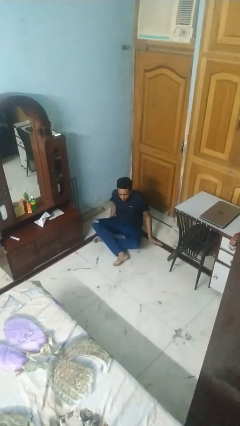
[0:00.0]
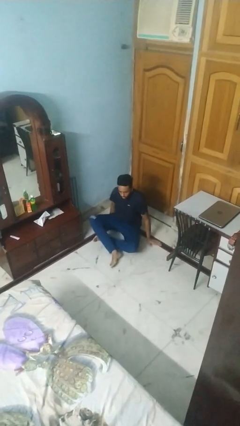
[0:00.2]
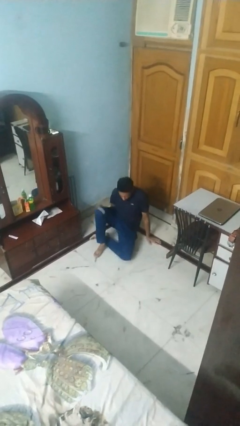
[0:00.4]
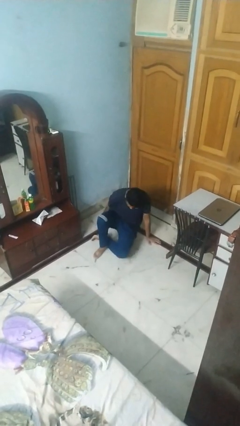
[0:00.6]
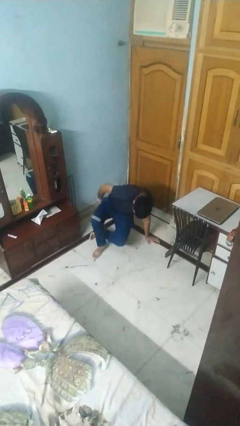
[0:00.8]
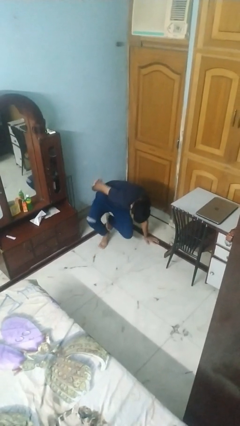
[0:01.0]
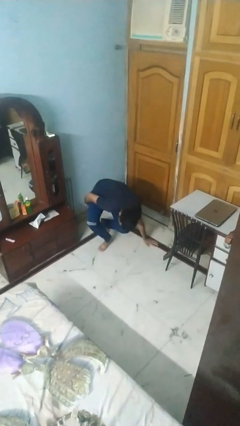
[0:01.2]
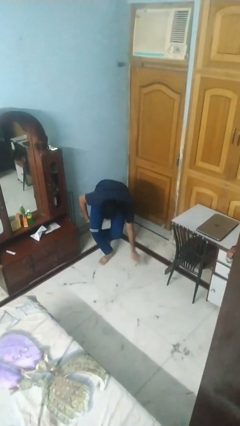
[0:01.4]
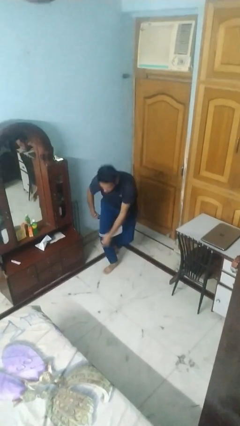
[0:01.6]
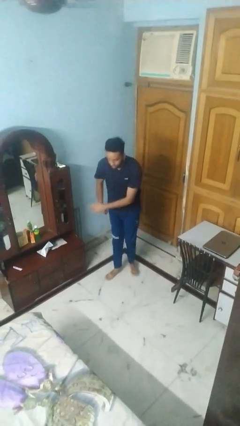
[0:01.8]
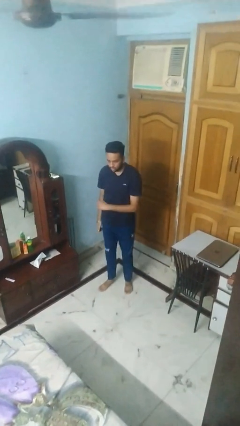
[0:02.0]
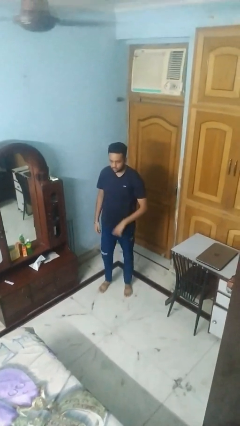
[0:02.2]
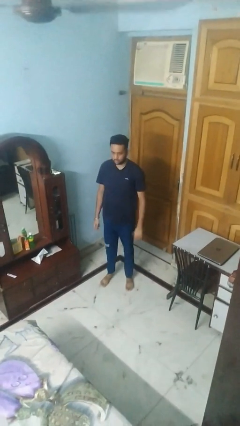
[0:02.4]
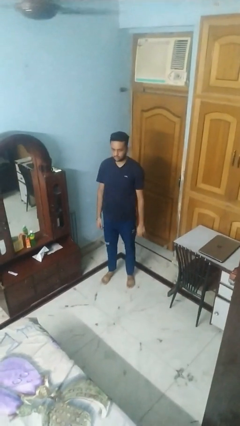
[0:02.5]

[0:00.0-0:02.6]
person stands up from floor

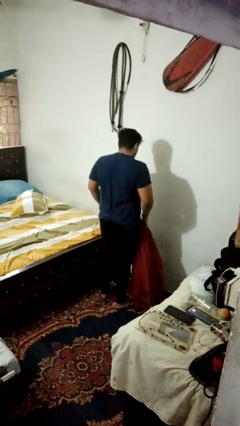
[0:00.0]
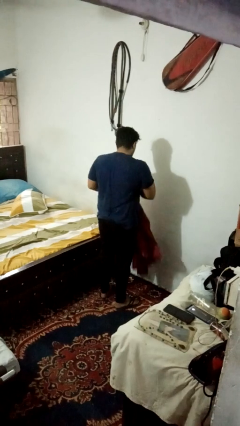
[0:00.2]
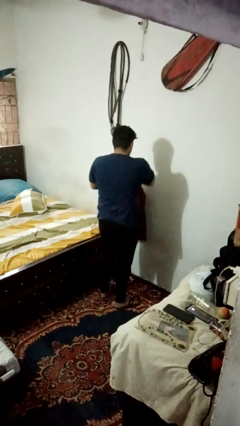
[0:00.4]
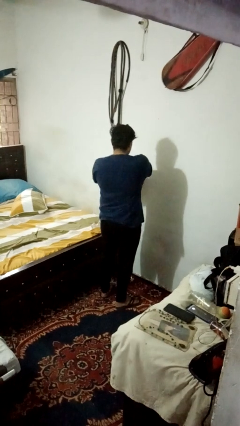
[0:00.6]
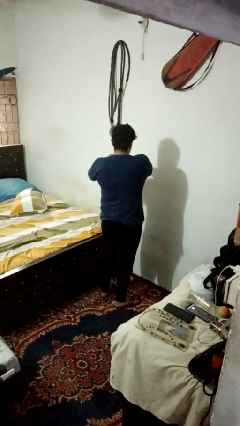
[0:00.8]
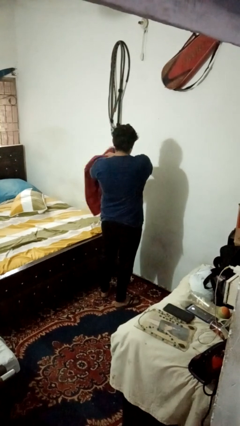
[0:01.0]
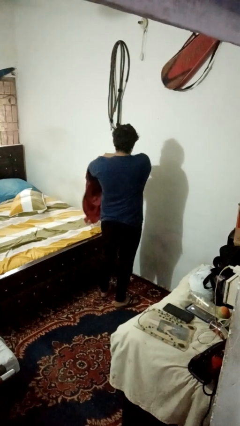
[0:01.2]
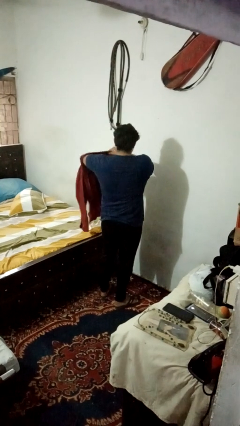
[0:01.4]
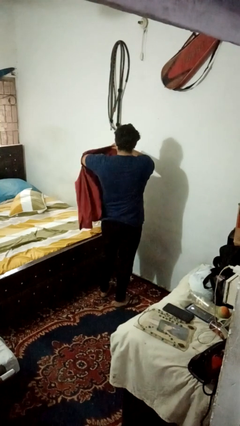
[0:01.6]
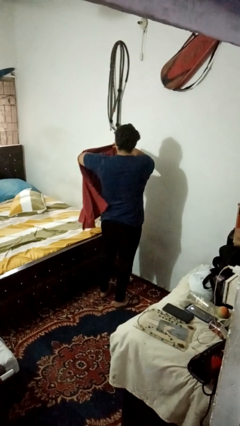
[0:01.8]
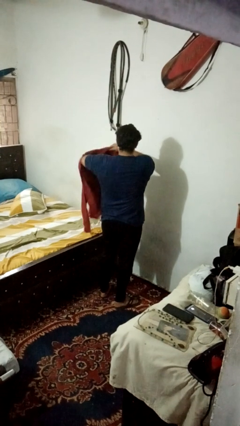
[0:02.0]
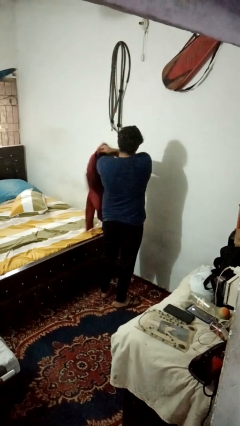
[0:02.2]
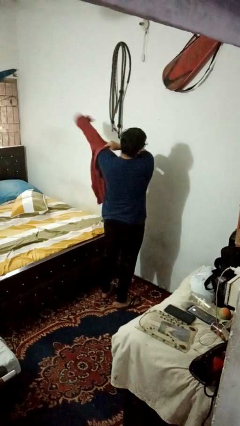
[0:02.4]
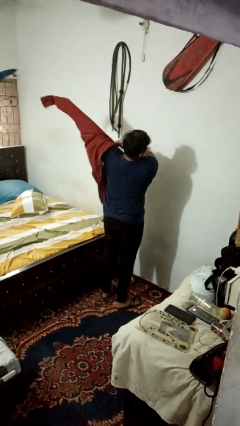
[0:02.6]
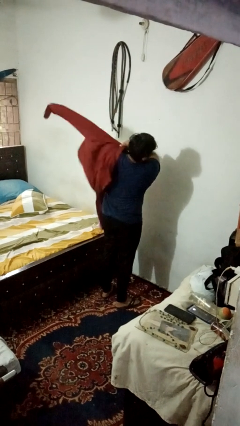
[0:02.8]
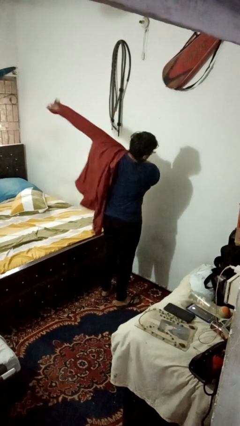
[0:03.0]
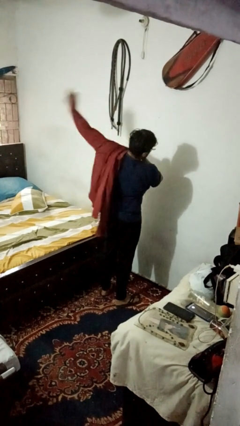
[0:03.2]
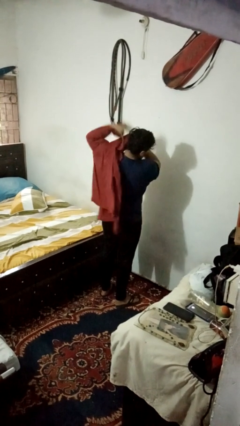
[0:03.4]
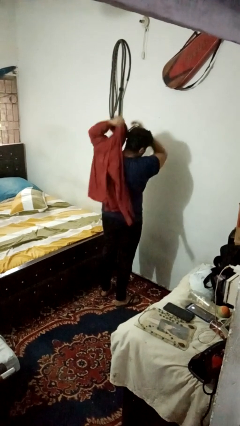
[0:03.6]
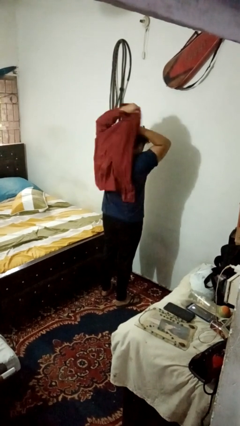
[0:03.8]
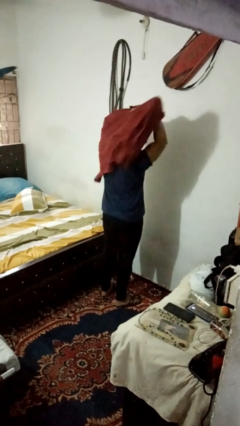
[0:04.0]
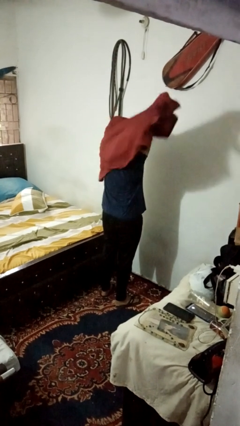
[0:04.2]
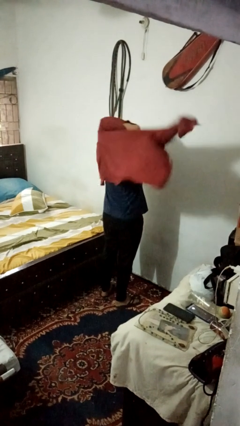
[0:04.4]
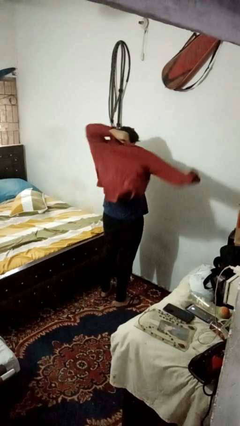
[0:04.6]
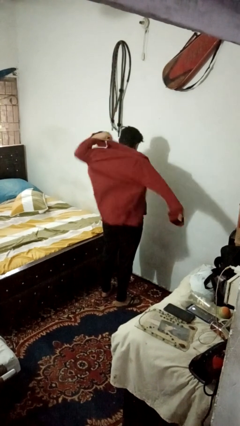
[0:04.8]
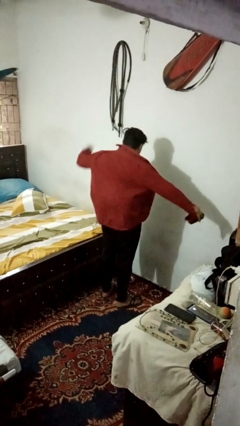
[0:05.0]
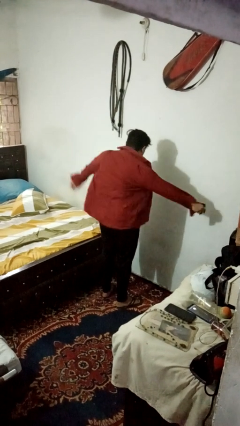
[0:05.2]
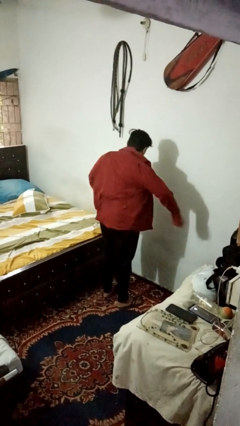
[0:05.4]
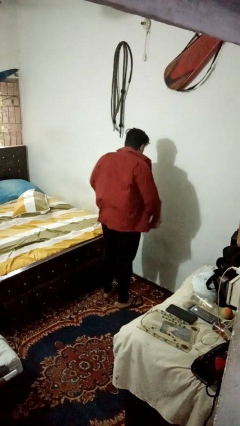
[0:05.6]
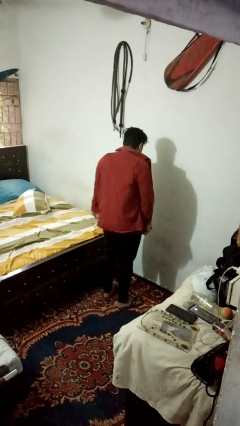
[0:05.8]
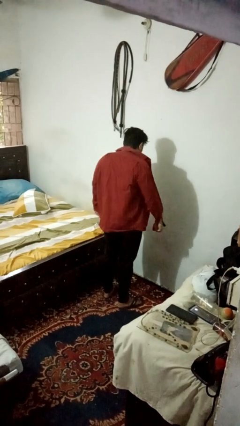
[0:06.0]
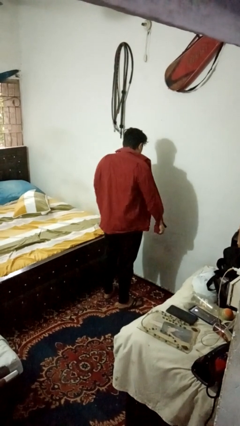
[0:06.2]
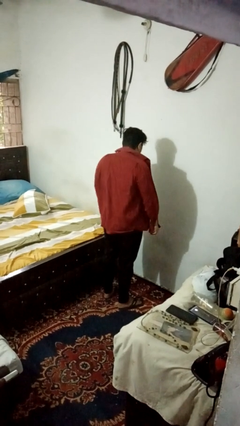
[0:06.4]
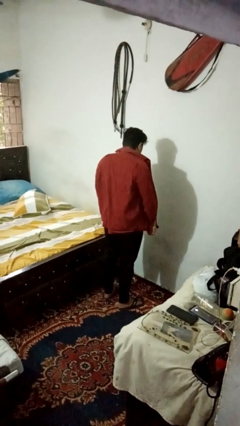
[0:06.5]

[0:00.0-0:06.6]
person puts on shirt

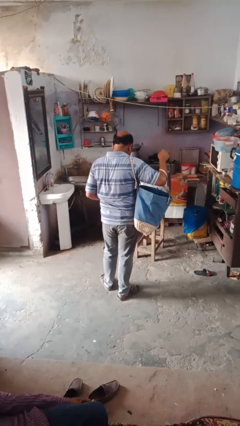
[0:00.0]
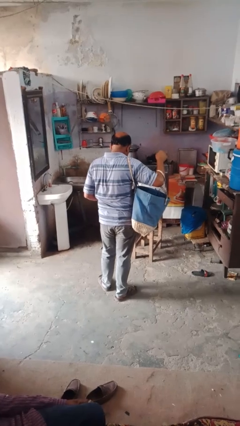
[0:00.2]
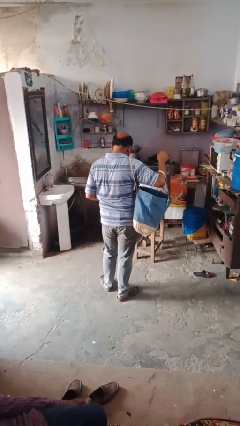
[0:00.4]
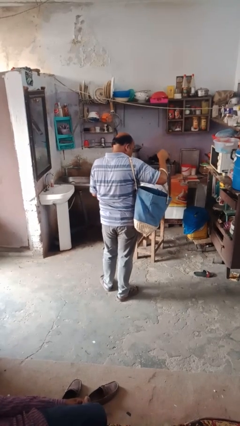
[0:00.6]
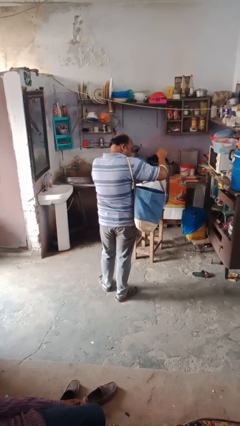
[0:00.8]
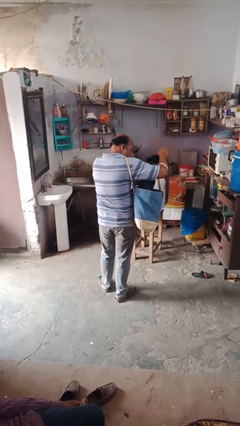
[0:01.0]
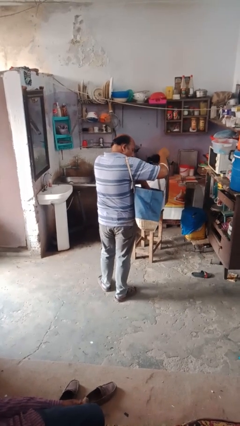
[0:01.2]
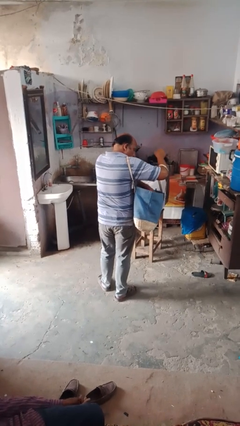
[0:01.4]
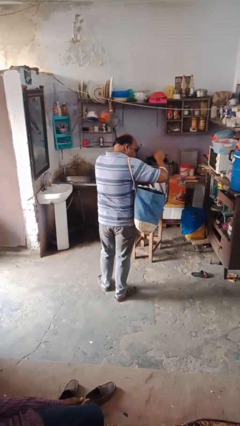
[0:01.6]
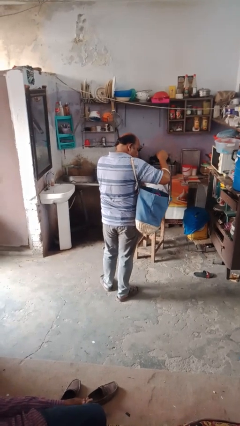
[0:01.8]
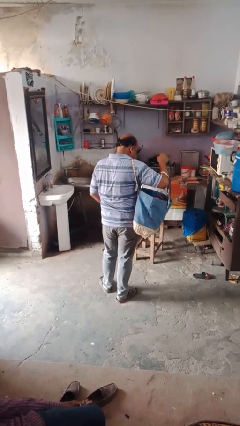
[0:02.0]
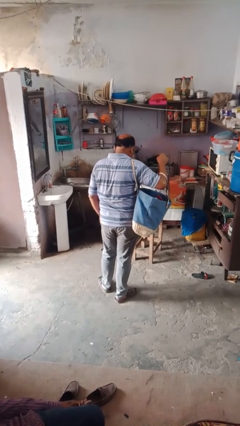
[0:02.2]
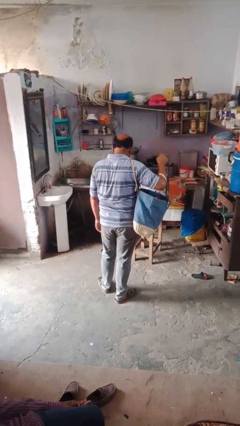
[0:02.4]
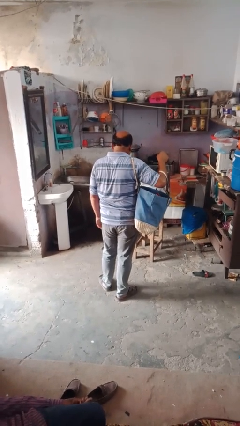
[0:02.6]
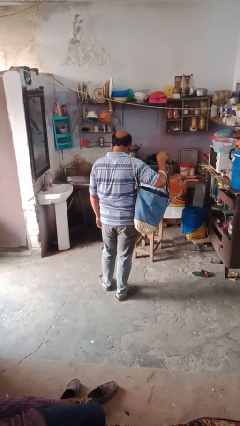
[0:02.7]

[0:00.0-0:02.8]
person puts object into bag

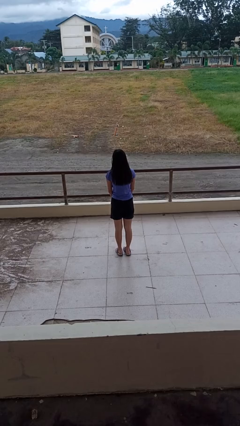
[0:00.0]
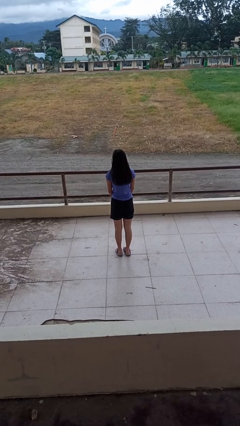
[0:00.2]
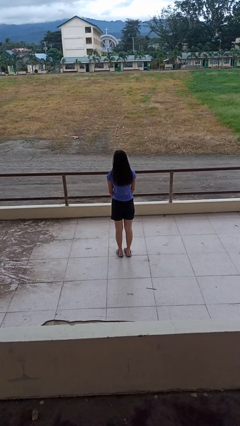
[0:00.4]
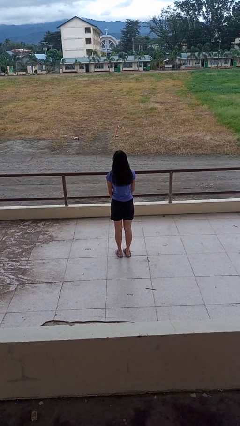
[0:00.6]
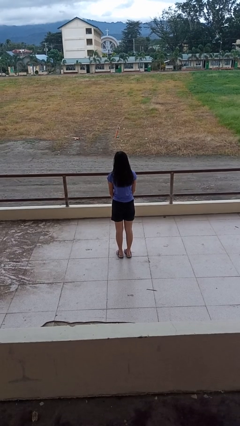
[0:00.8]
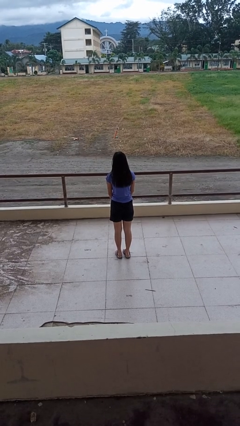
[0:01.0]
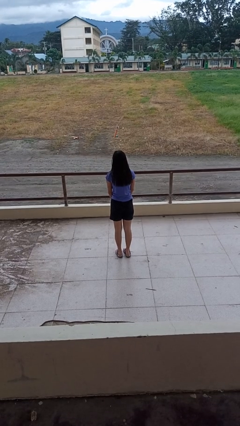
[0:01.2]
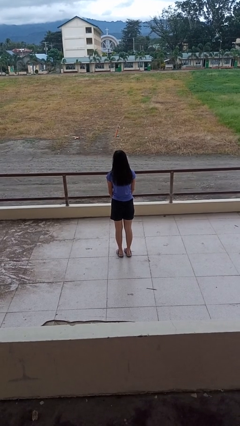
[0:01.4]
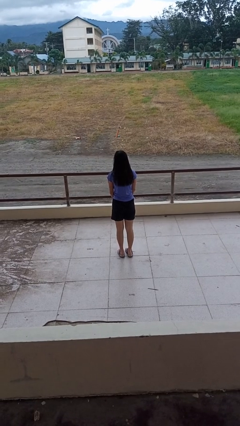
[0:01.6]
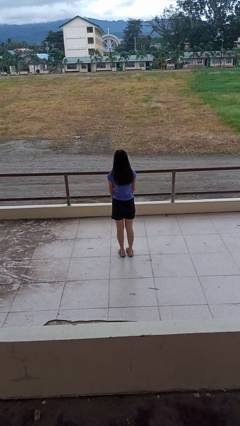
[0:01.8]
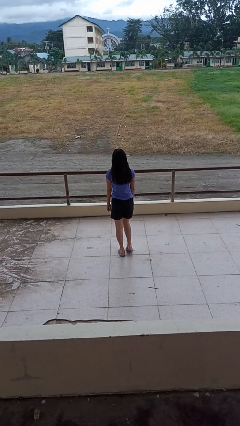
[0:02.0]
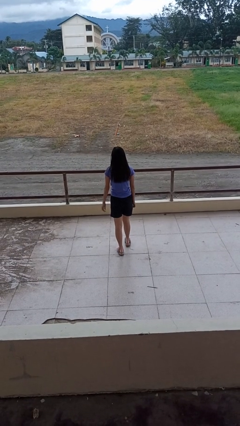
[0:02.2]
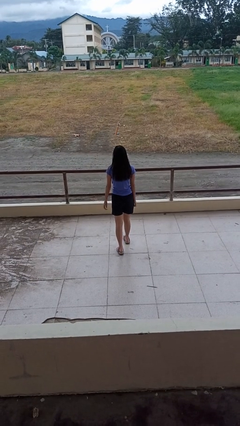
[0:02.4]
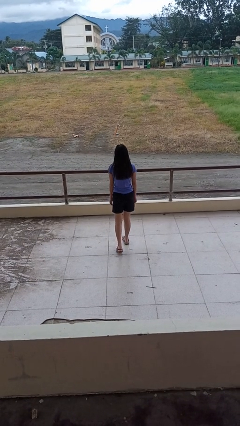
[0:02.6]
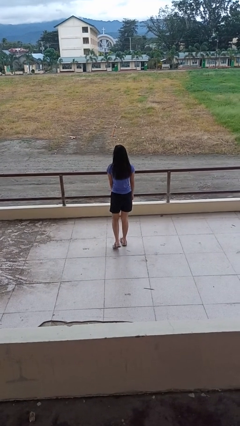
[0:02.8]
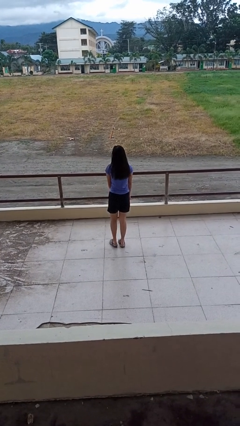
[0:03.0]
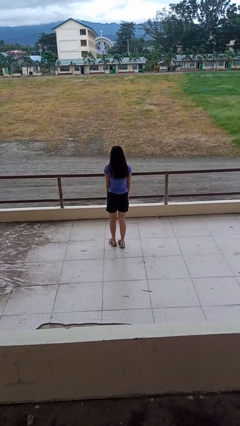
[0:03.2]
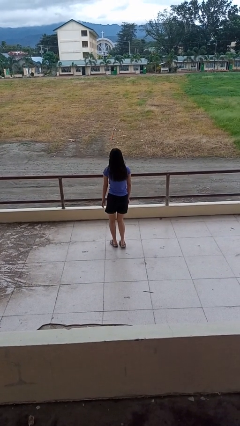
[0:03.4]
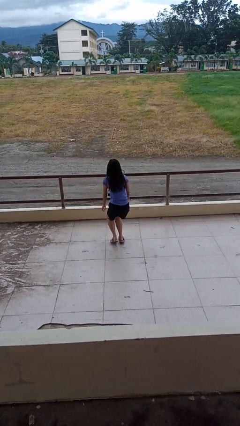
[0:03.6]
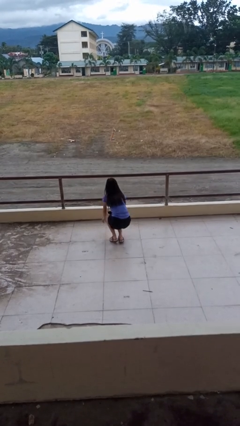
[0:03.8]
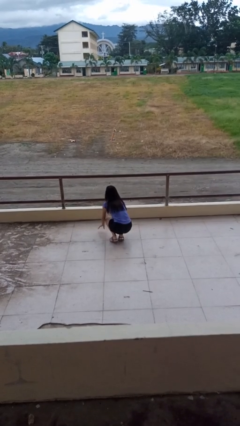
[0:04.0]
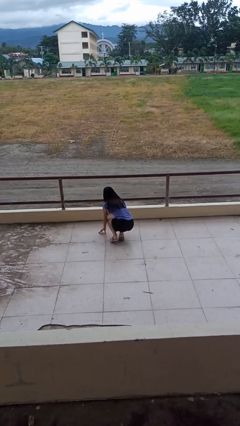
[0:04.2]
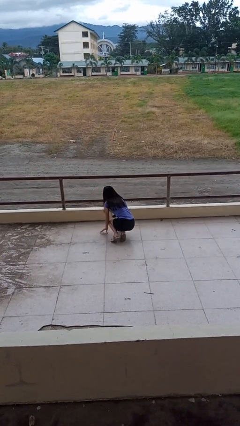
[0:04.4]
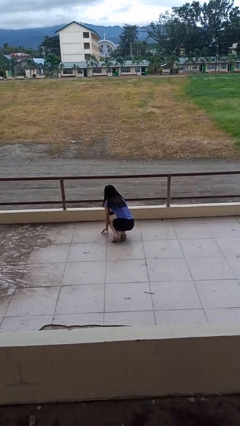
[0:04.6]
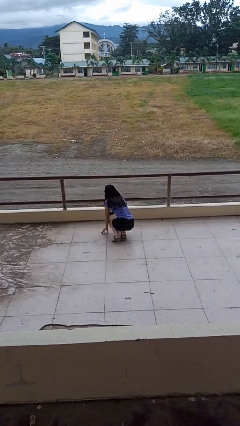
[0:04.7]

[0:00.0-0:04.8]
person trips on object on floor

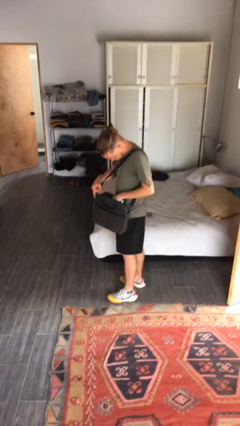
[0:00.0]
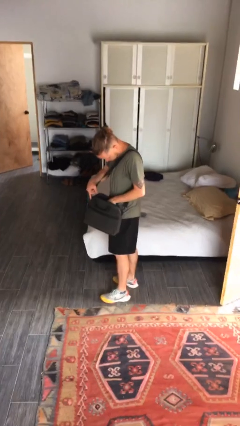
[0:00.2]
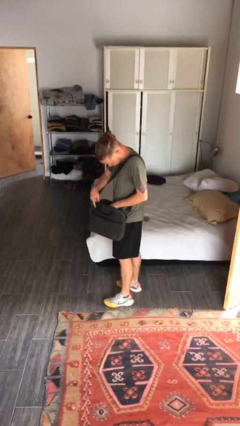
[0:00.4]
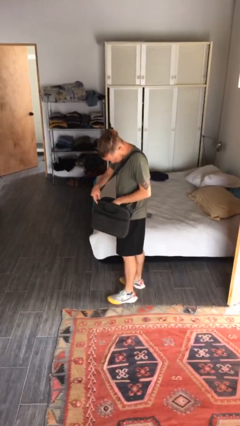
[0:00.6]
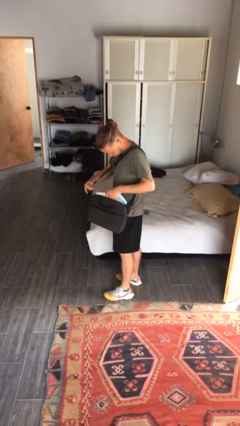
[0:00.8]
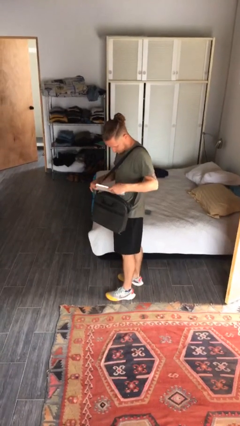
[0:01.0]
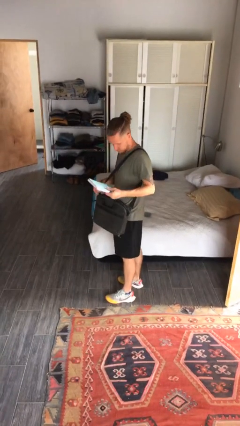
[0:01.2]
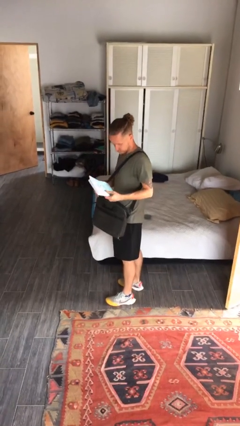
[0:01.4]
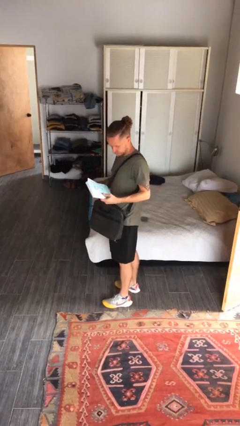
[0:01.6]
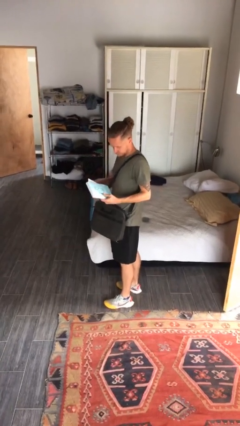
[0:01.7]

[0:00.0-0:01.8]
person takes object from purse
